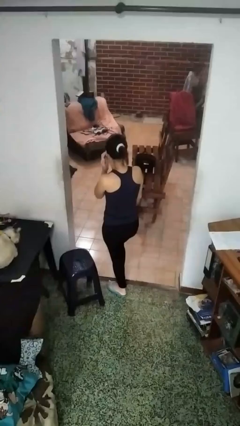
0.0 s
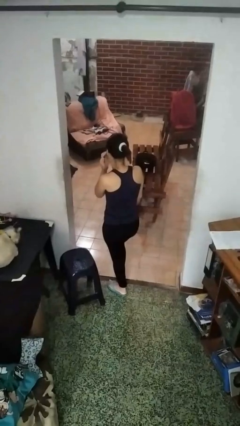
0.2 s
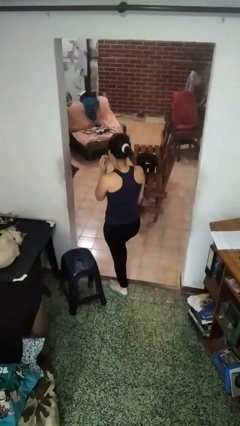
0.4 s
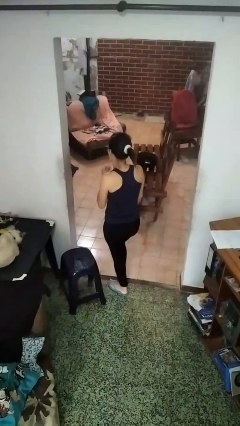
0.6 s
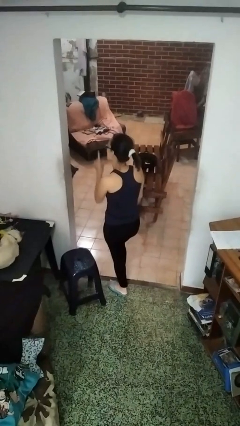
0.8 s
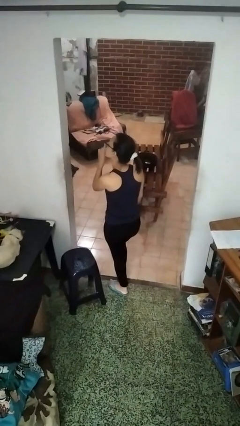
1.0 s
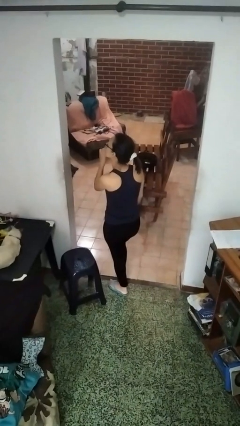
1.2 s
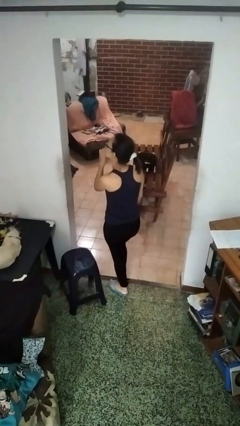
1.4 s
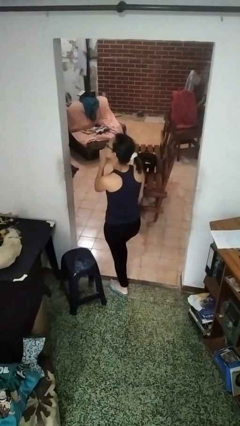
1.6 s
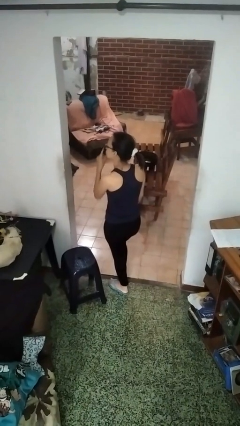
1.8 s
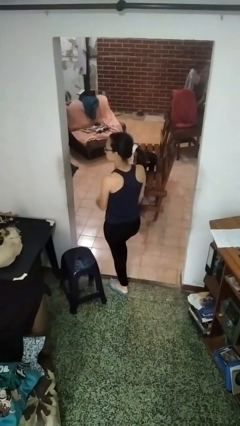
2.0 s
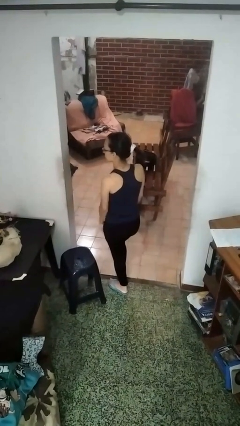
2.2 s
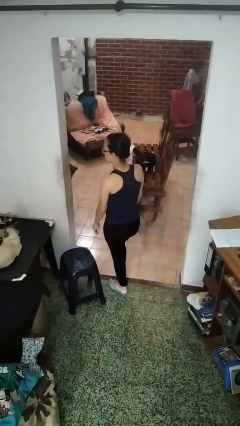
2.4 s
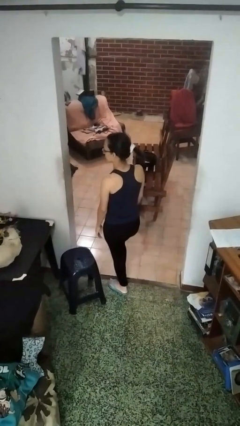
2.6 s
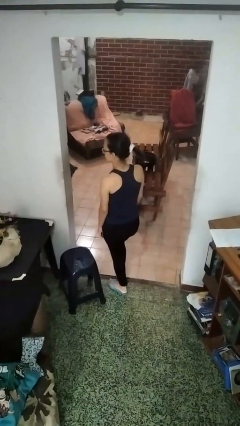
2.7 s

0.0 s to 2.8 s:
person gestures be quiet

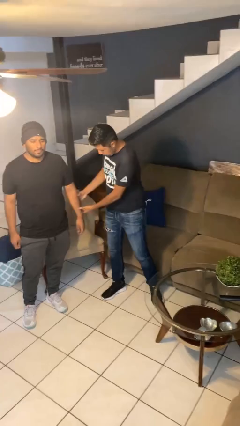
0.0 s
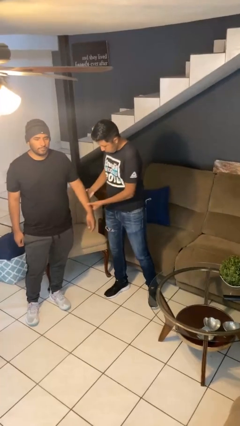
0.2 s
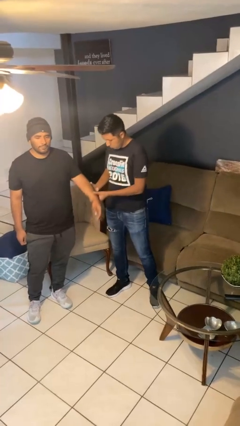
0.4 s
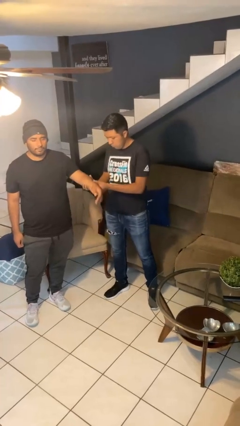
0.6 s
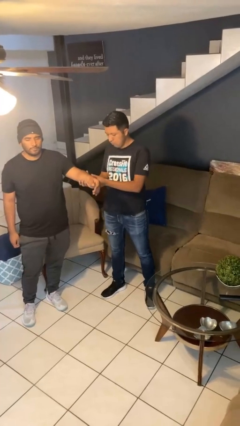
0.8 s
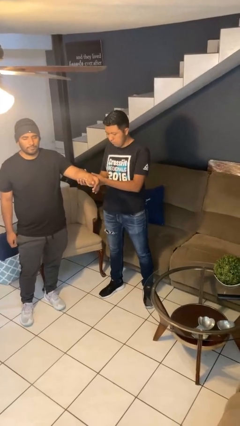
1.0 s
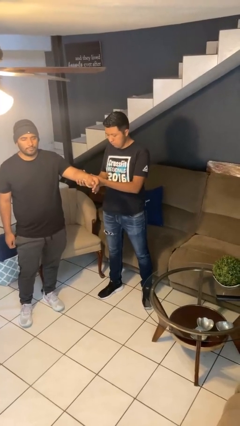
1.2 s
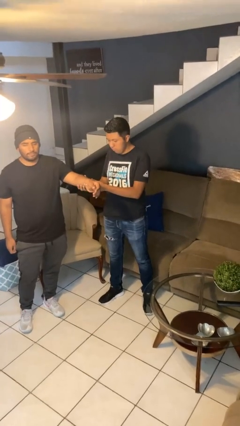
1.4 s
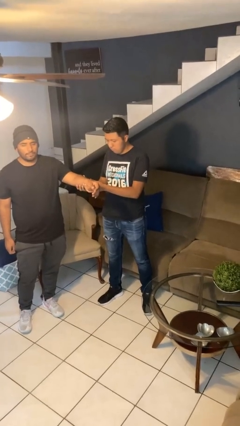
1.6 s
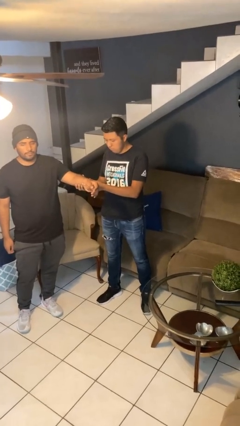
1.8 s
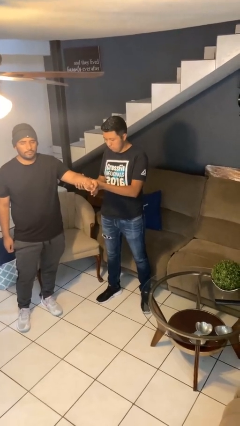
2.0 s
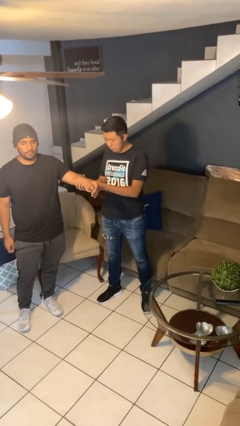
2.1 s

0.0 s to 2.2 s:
person grabs person by forearm

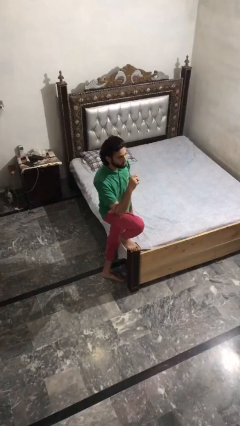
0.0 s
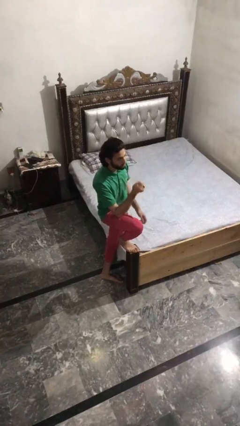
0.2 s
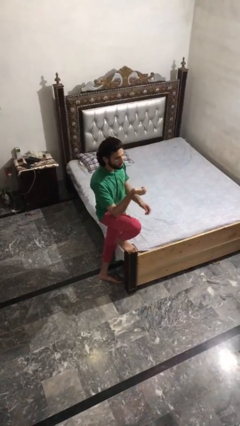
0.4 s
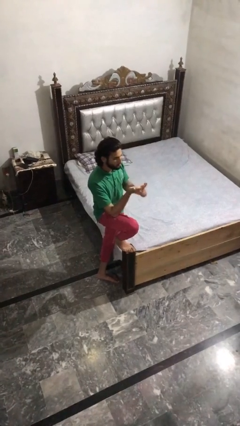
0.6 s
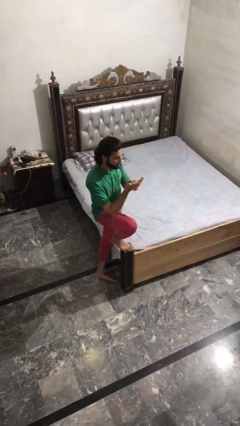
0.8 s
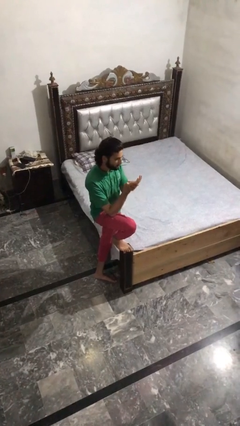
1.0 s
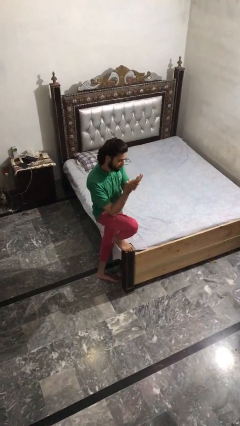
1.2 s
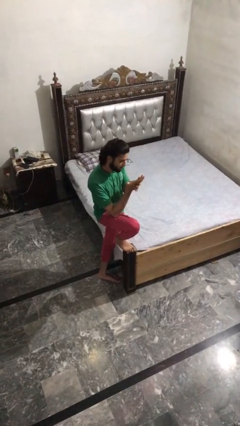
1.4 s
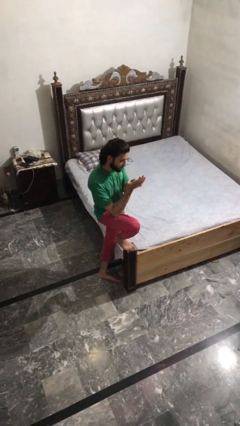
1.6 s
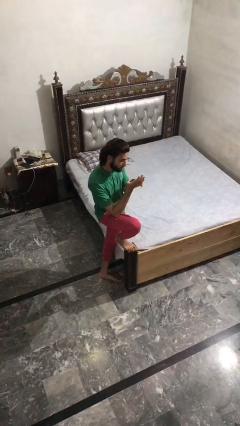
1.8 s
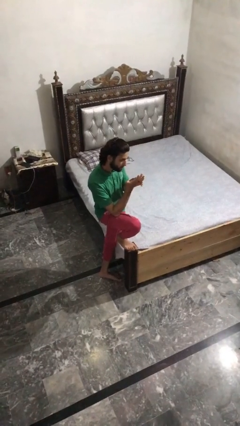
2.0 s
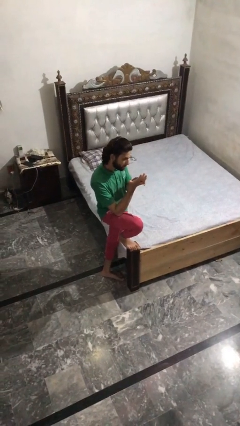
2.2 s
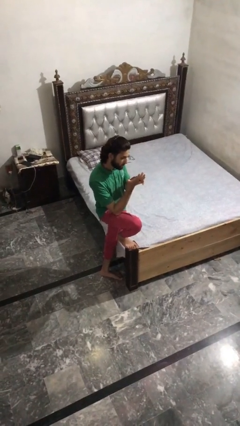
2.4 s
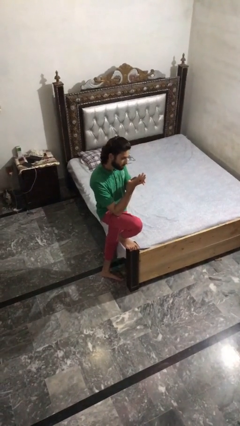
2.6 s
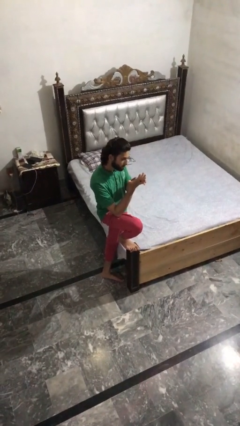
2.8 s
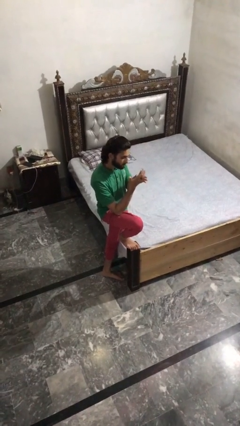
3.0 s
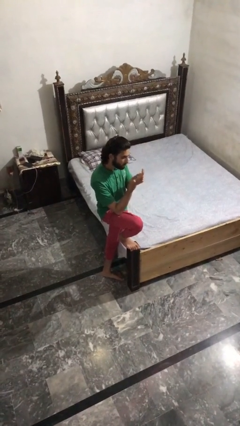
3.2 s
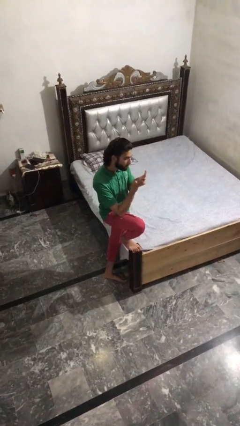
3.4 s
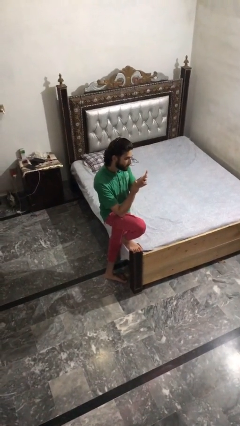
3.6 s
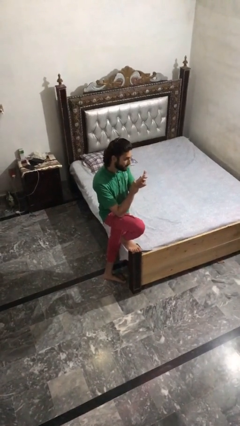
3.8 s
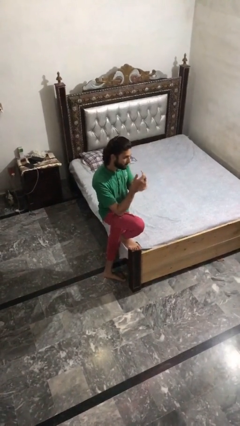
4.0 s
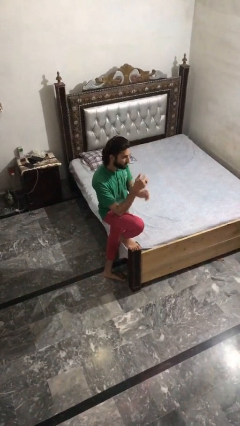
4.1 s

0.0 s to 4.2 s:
person looks at hands in lap

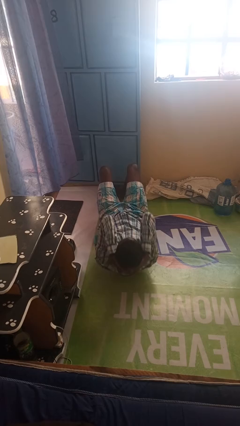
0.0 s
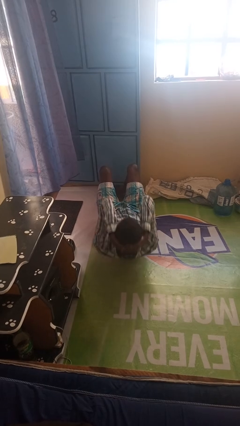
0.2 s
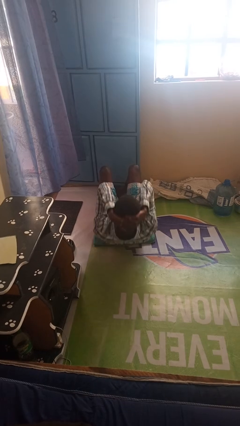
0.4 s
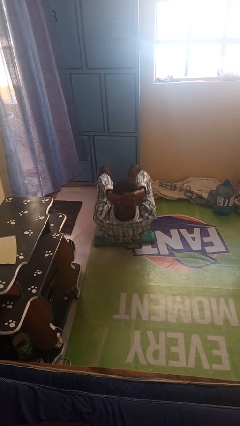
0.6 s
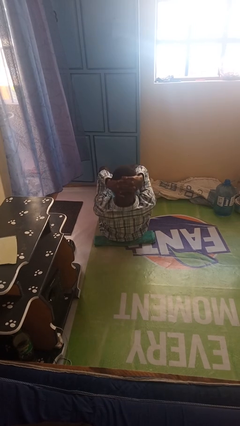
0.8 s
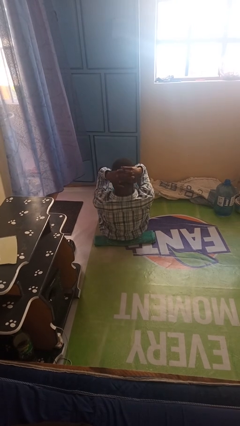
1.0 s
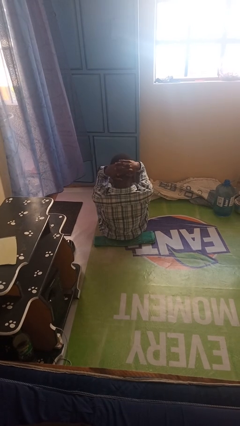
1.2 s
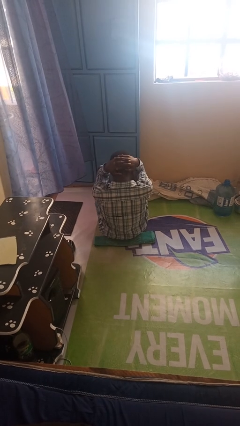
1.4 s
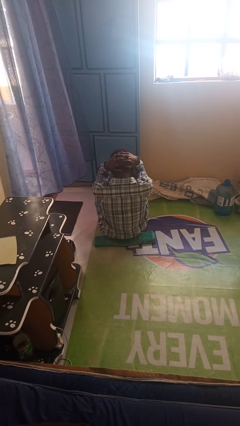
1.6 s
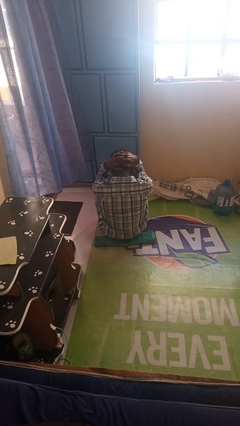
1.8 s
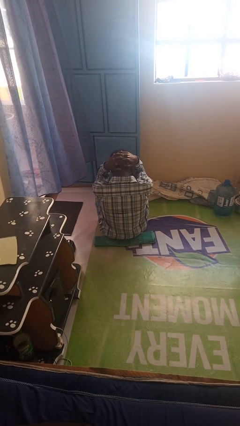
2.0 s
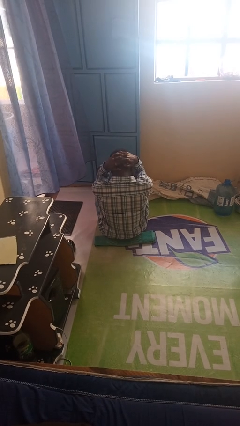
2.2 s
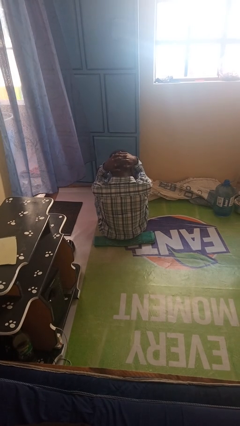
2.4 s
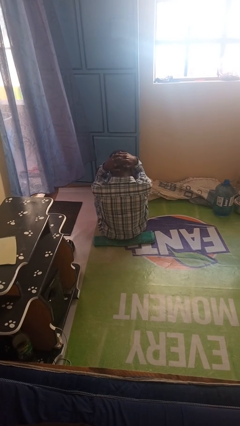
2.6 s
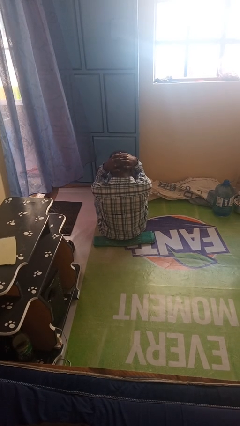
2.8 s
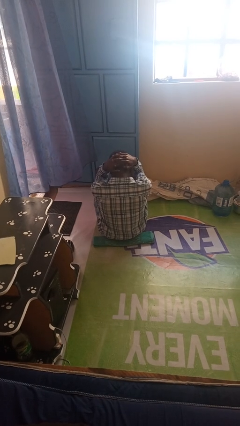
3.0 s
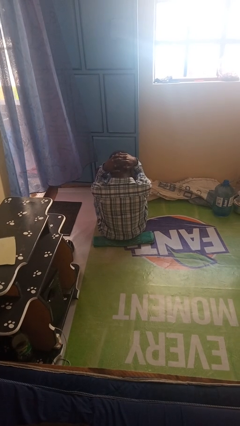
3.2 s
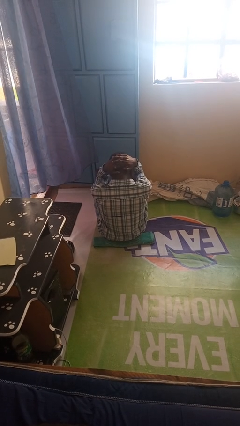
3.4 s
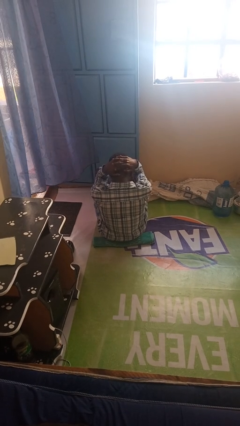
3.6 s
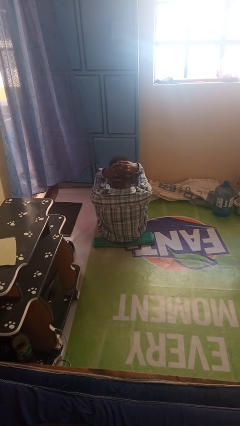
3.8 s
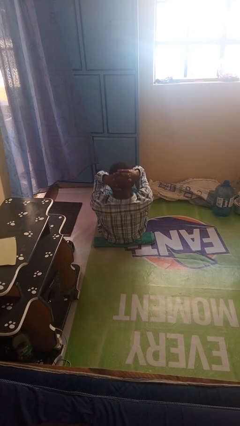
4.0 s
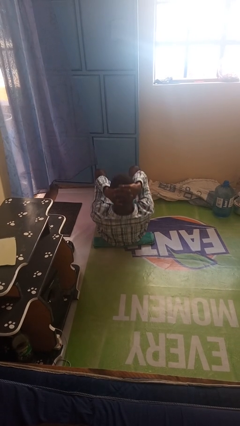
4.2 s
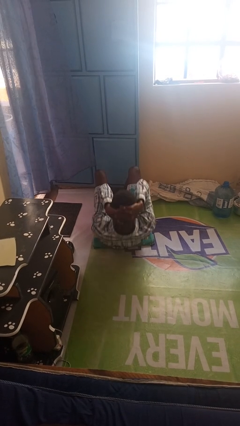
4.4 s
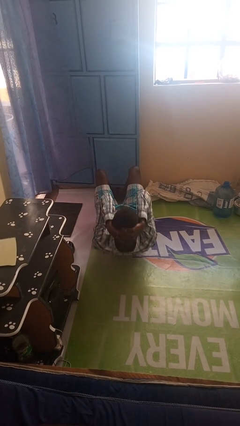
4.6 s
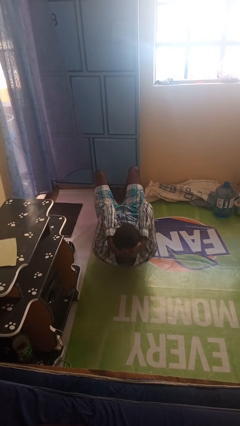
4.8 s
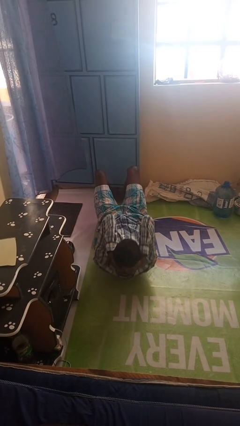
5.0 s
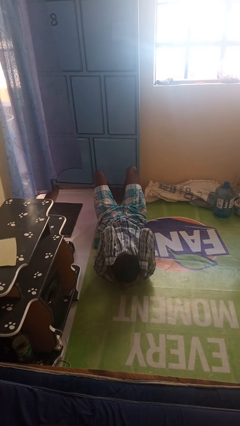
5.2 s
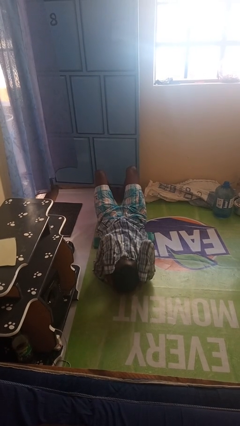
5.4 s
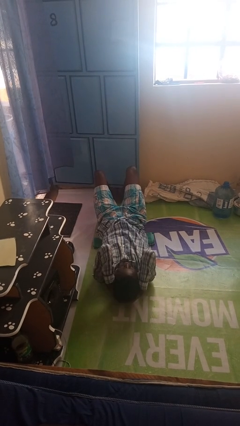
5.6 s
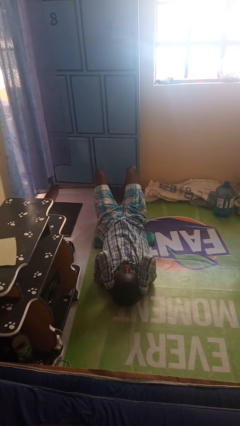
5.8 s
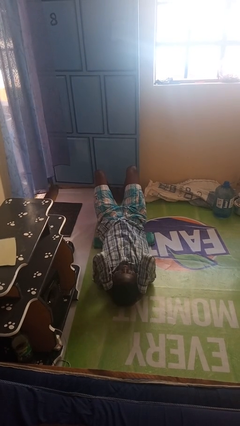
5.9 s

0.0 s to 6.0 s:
person exercises with situp

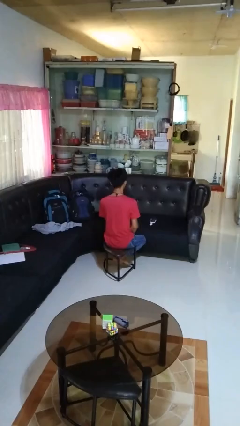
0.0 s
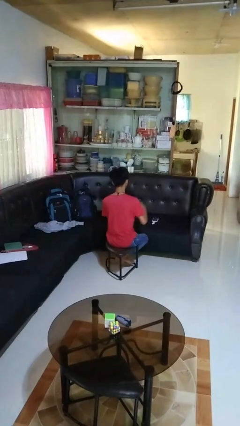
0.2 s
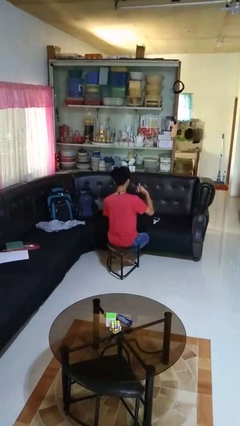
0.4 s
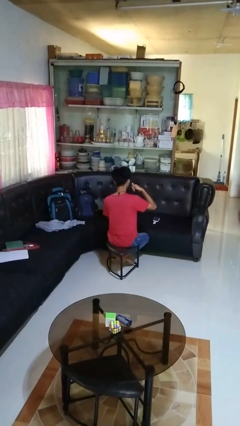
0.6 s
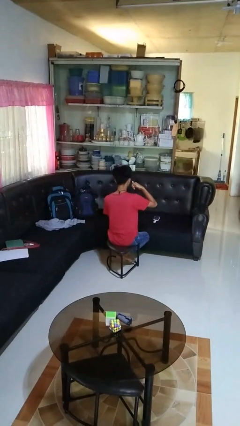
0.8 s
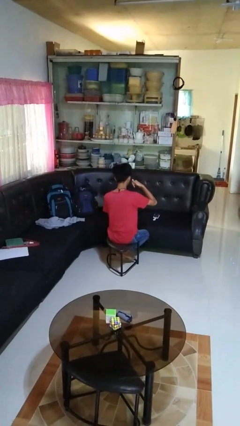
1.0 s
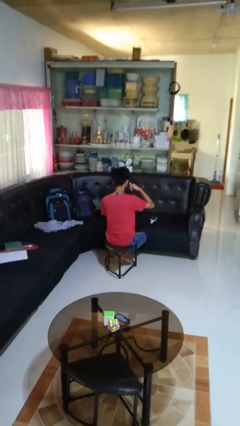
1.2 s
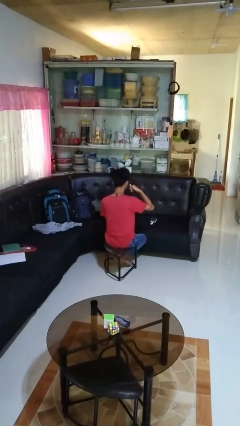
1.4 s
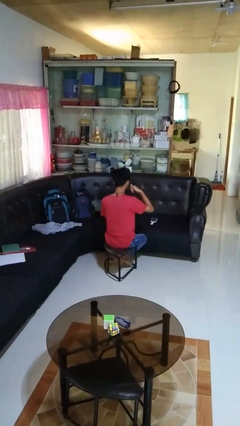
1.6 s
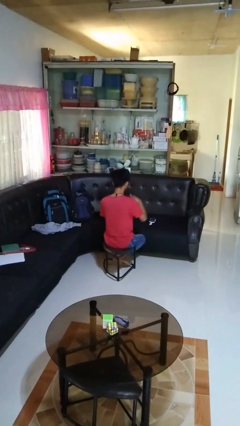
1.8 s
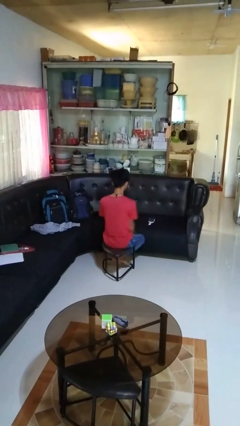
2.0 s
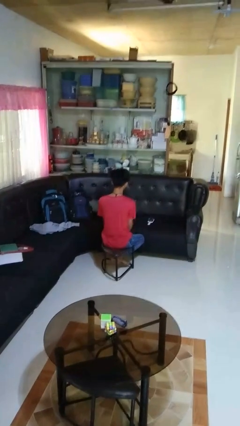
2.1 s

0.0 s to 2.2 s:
person gestures call me

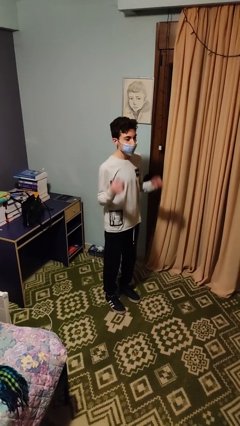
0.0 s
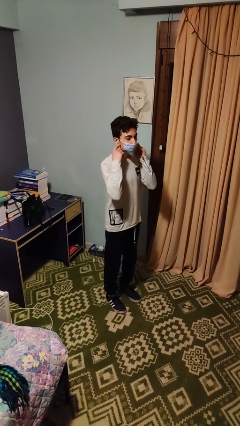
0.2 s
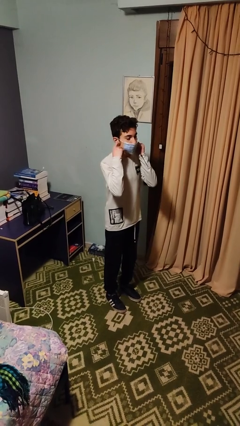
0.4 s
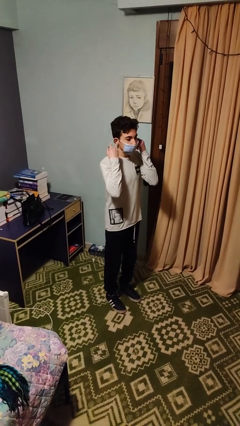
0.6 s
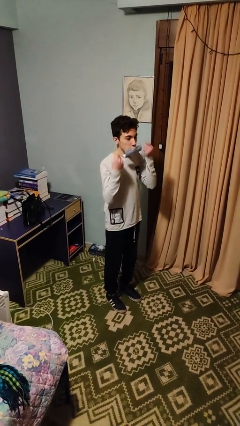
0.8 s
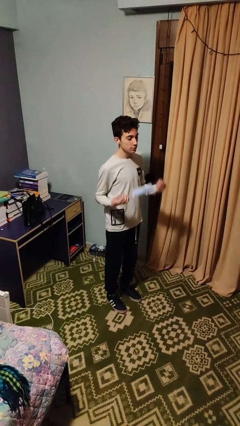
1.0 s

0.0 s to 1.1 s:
person takes off facemask
